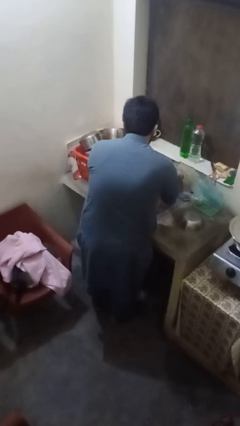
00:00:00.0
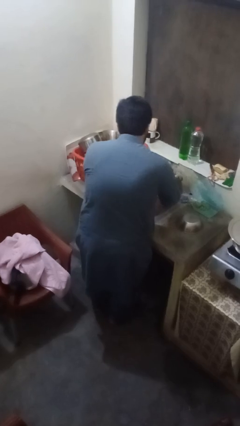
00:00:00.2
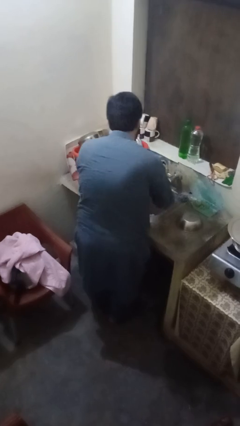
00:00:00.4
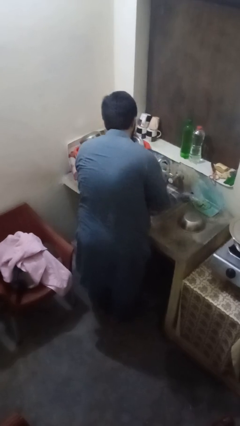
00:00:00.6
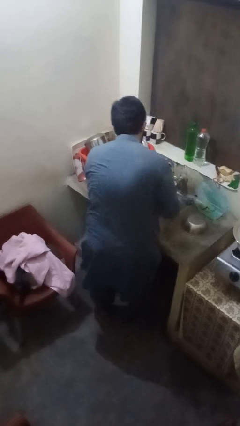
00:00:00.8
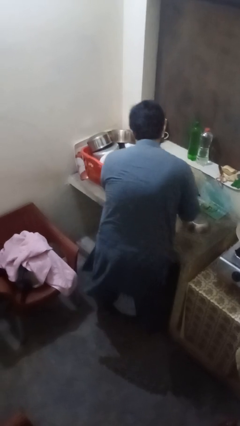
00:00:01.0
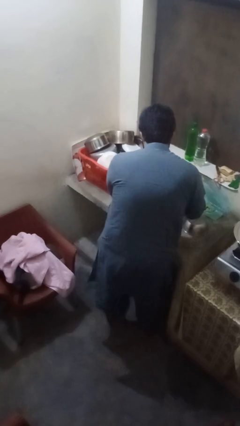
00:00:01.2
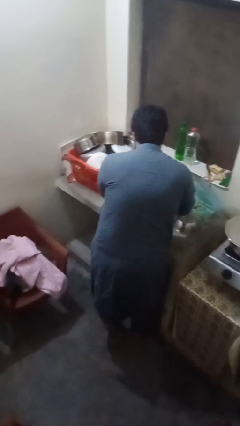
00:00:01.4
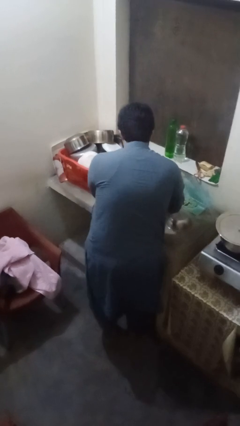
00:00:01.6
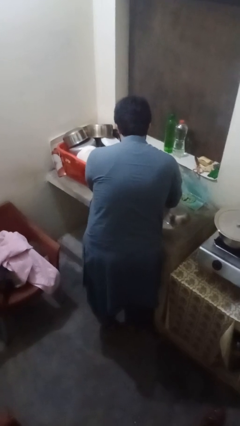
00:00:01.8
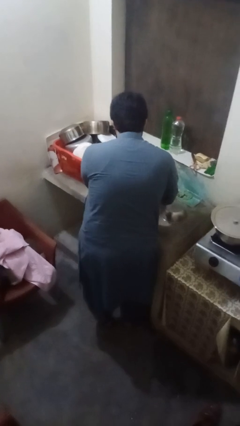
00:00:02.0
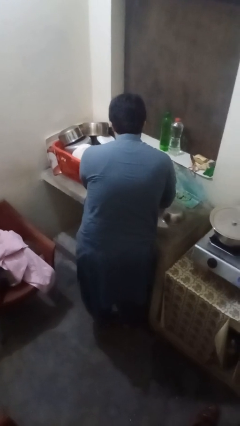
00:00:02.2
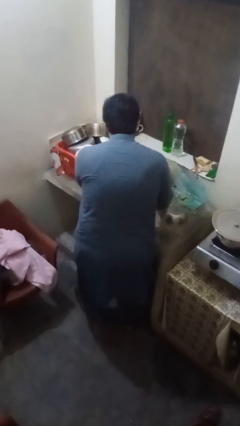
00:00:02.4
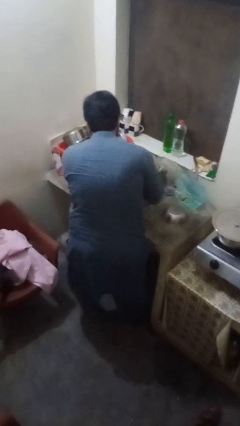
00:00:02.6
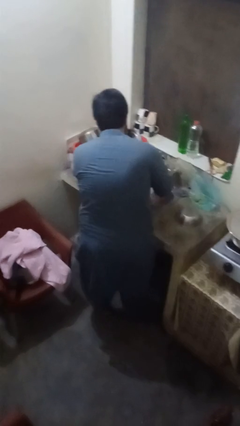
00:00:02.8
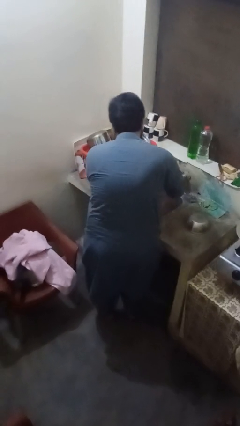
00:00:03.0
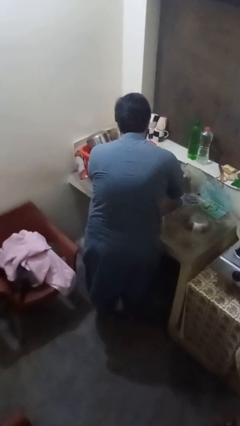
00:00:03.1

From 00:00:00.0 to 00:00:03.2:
person washes dish

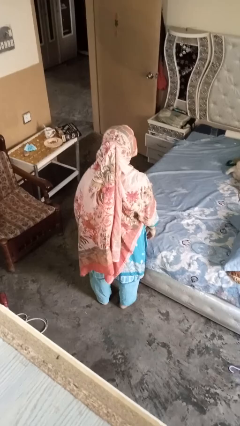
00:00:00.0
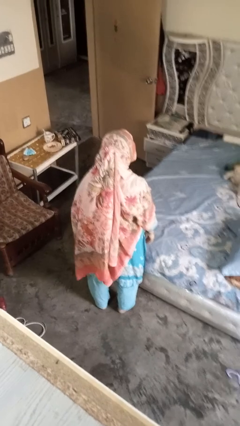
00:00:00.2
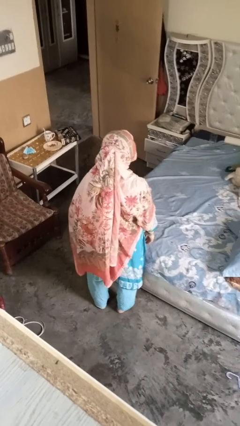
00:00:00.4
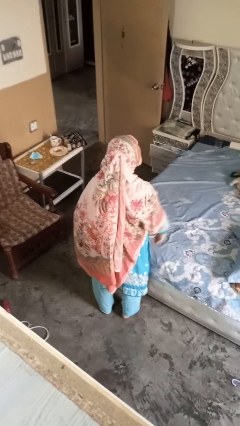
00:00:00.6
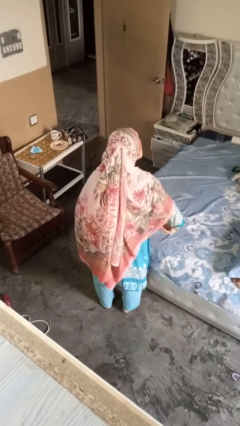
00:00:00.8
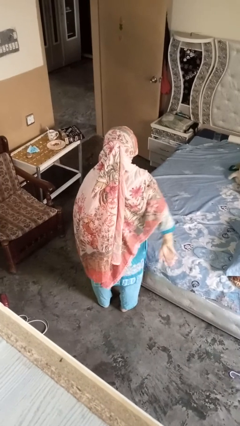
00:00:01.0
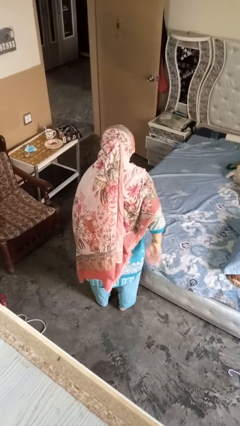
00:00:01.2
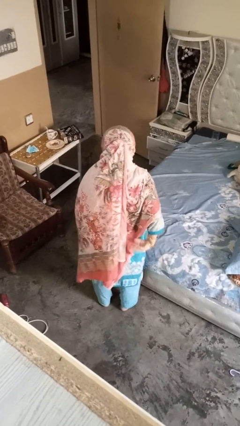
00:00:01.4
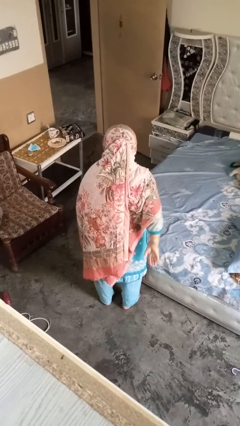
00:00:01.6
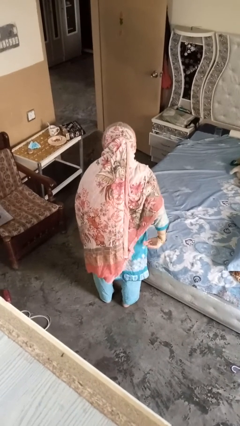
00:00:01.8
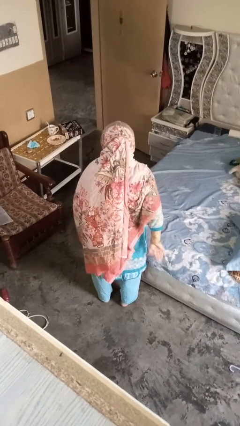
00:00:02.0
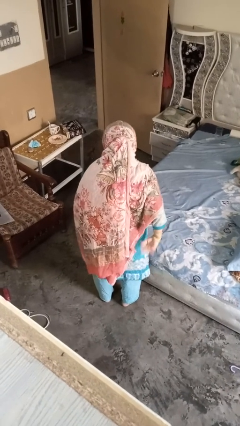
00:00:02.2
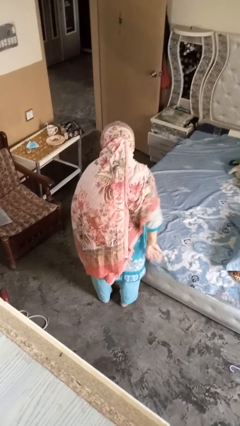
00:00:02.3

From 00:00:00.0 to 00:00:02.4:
person gestures behind me

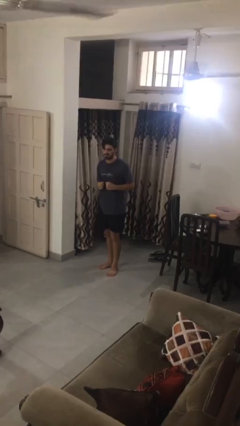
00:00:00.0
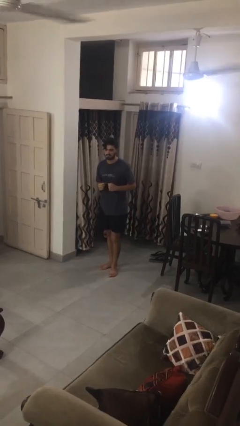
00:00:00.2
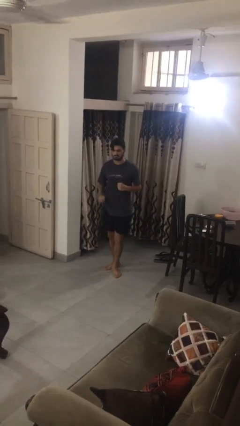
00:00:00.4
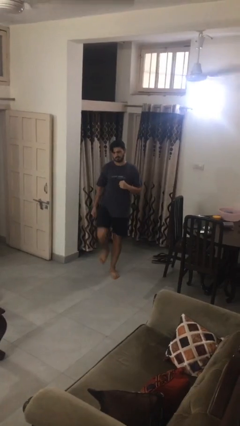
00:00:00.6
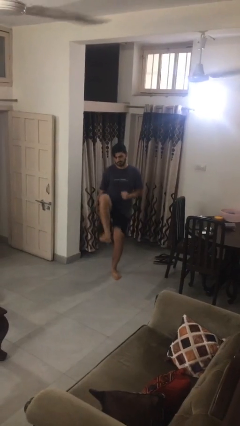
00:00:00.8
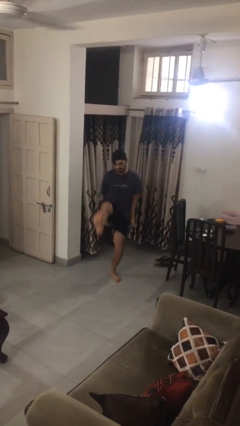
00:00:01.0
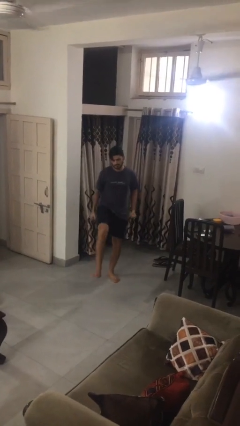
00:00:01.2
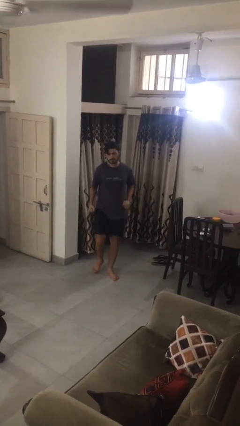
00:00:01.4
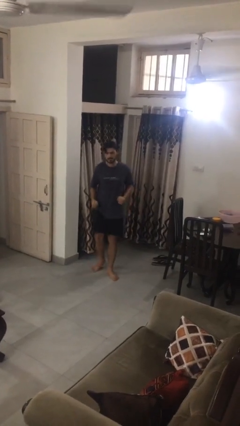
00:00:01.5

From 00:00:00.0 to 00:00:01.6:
person karate kicks

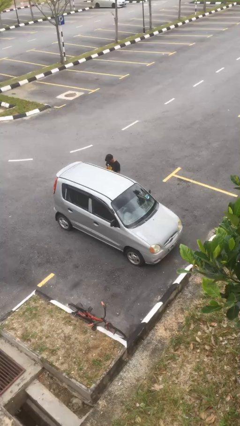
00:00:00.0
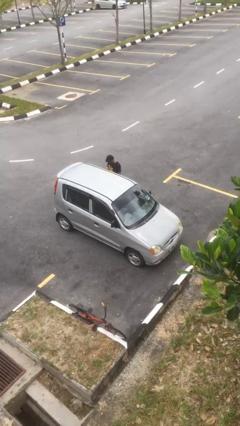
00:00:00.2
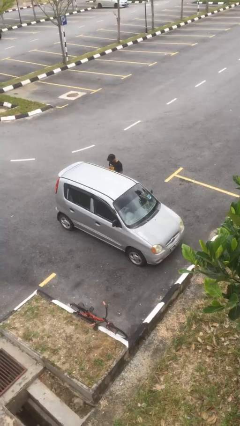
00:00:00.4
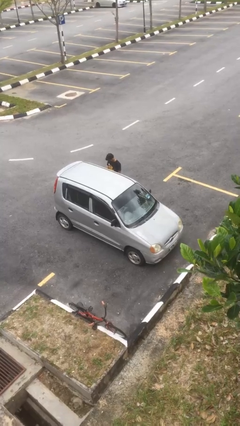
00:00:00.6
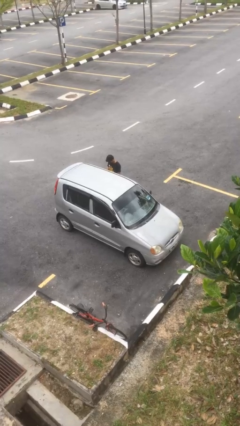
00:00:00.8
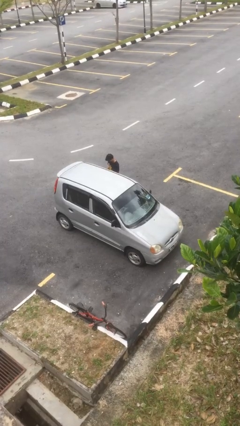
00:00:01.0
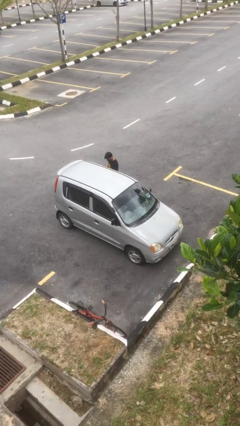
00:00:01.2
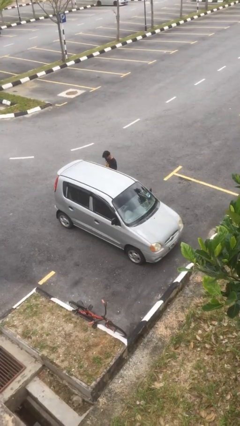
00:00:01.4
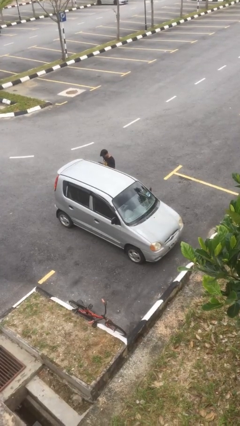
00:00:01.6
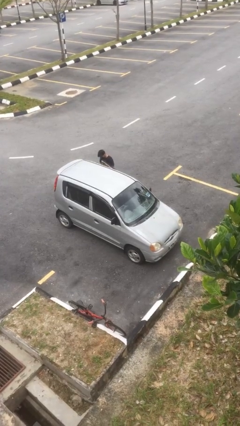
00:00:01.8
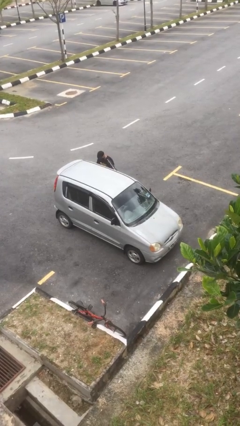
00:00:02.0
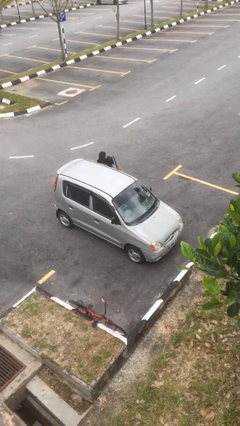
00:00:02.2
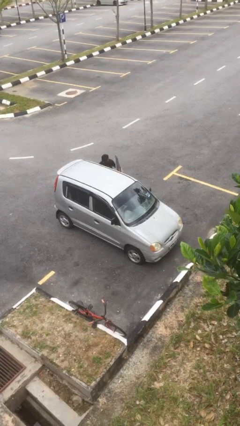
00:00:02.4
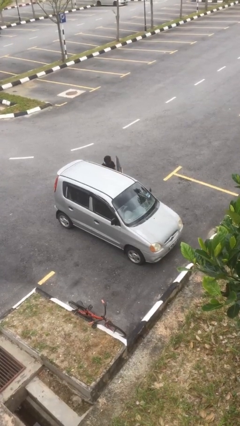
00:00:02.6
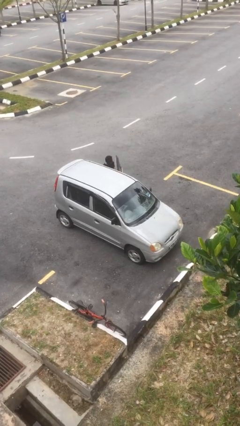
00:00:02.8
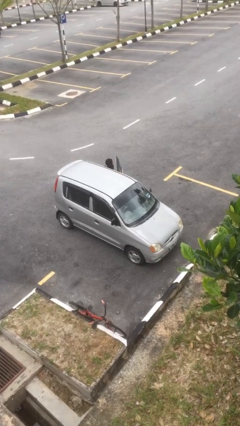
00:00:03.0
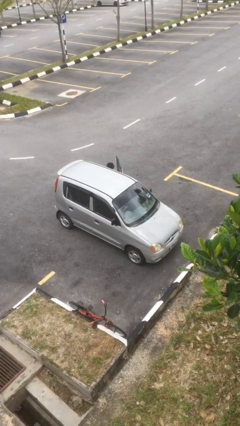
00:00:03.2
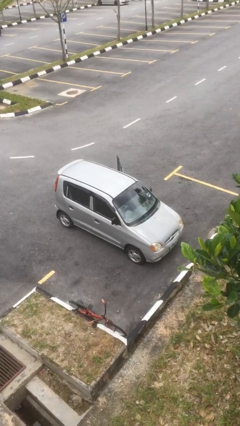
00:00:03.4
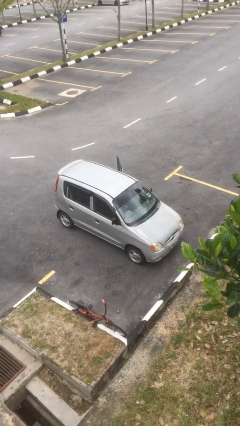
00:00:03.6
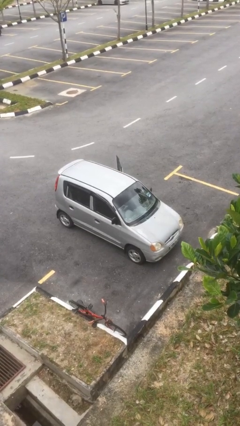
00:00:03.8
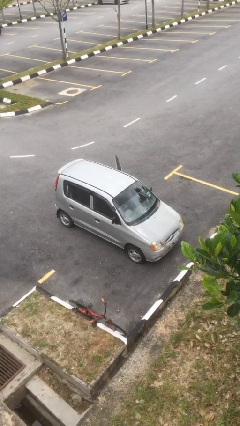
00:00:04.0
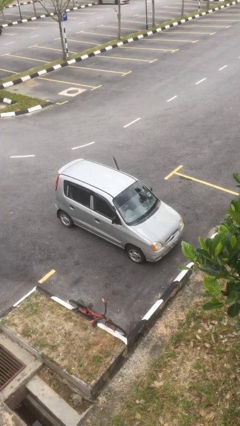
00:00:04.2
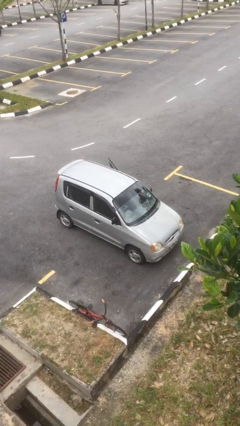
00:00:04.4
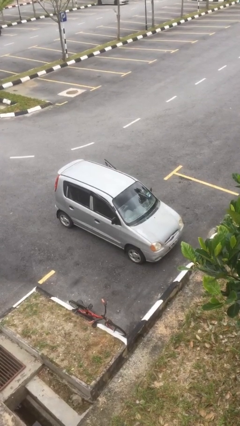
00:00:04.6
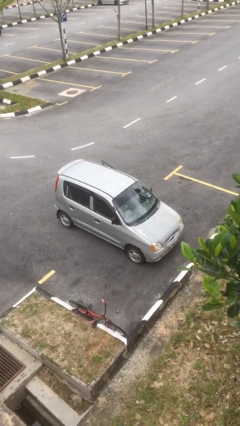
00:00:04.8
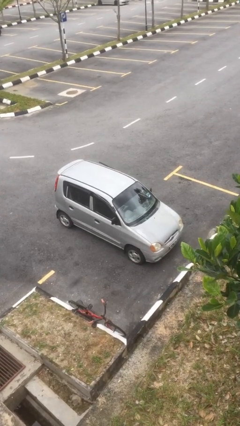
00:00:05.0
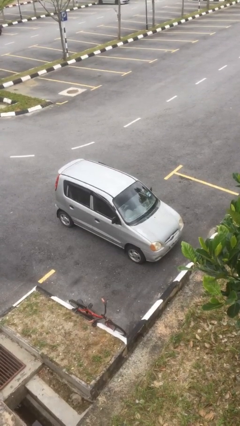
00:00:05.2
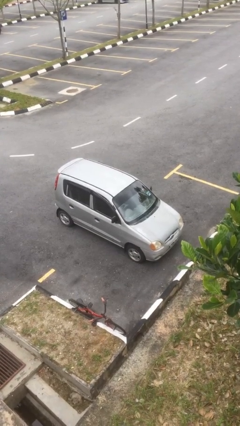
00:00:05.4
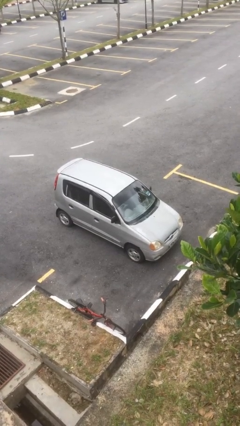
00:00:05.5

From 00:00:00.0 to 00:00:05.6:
car picks up person

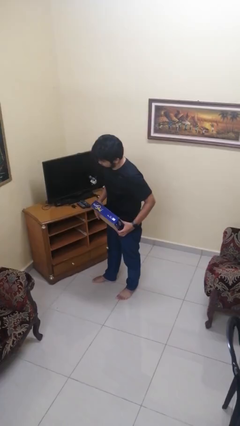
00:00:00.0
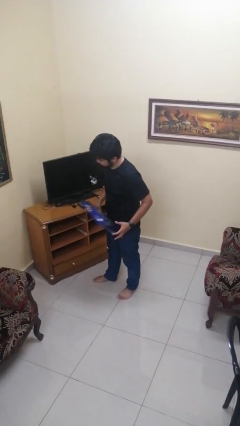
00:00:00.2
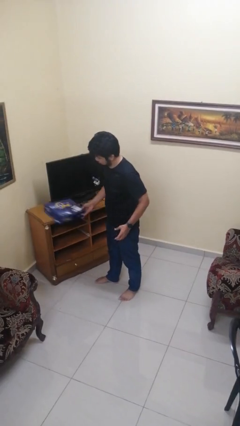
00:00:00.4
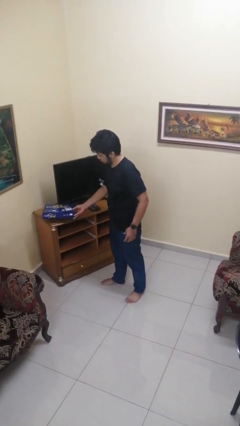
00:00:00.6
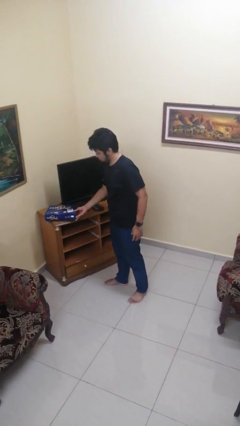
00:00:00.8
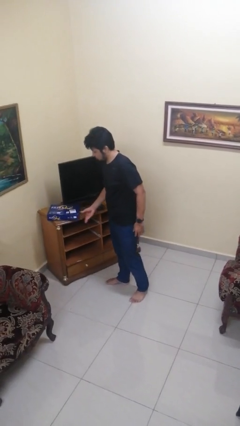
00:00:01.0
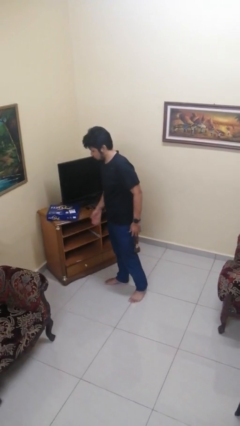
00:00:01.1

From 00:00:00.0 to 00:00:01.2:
person puts down object on countertop

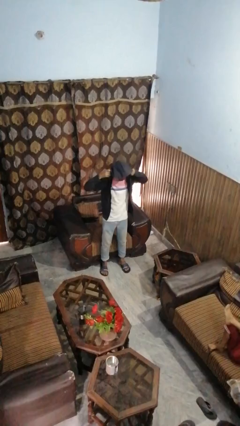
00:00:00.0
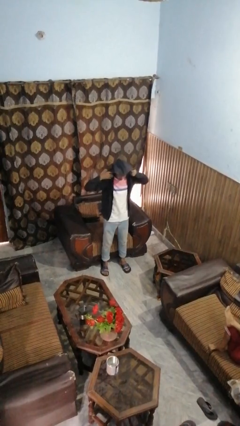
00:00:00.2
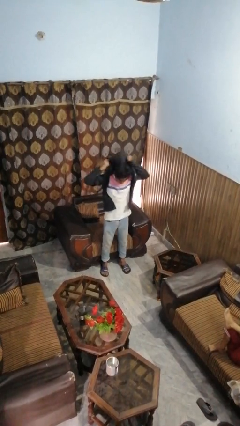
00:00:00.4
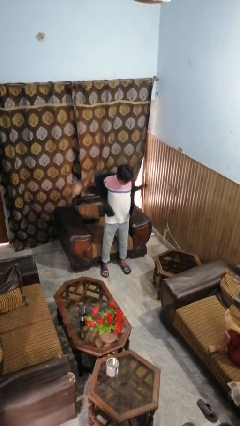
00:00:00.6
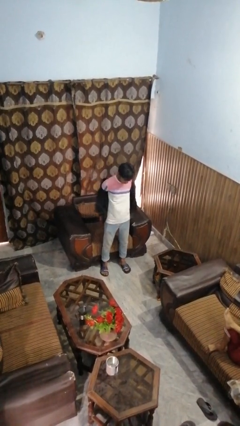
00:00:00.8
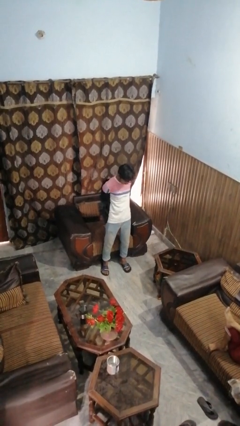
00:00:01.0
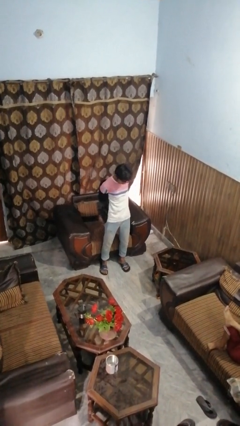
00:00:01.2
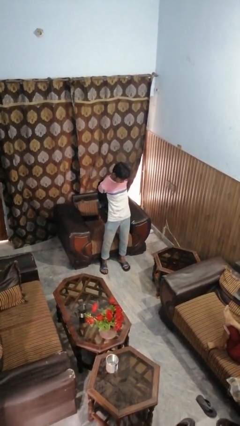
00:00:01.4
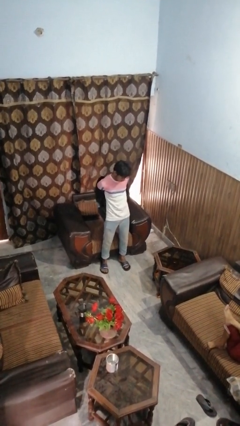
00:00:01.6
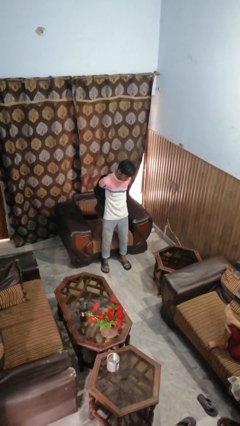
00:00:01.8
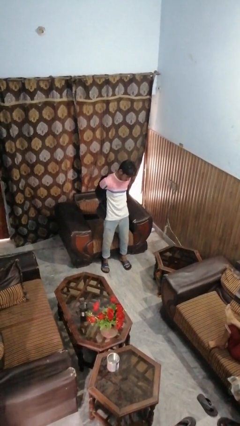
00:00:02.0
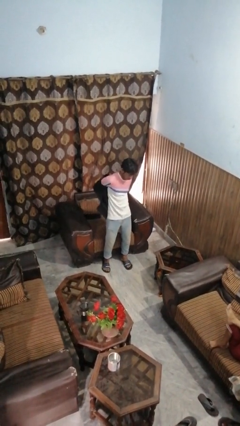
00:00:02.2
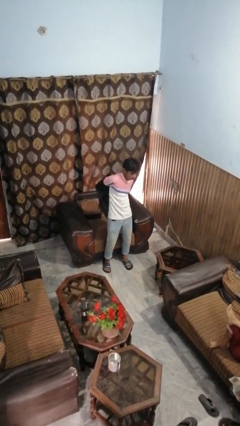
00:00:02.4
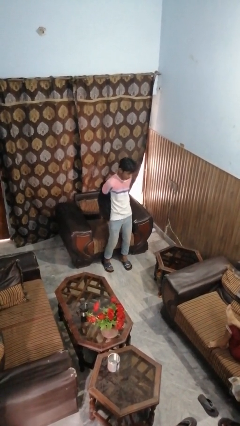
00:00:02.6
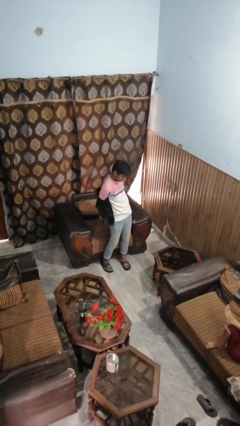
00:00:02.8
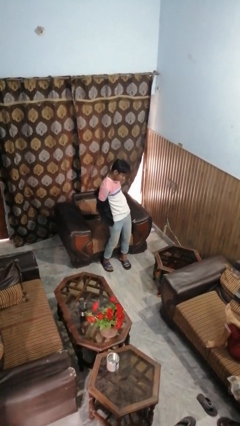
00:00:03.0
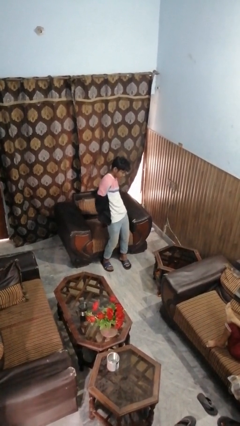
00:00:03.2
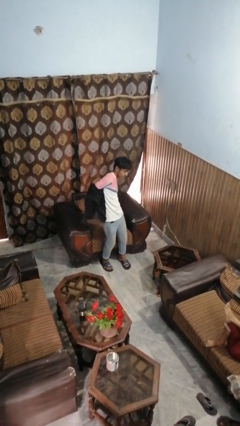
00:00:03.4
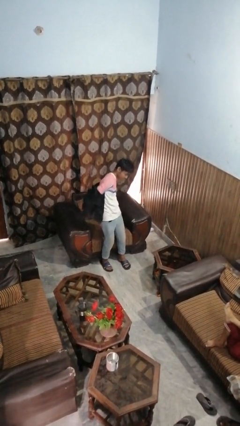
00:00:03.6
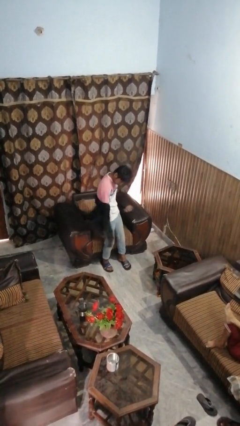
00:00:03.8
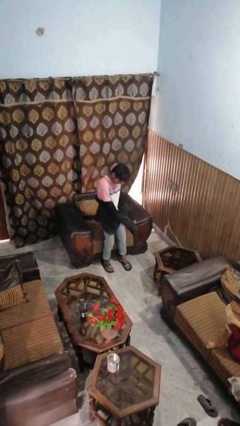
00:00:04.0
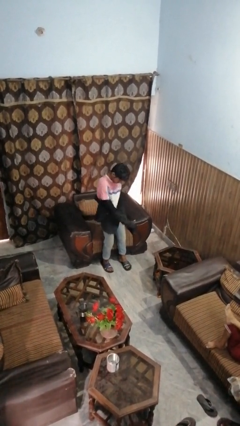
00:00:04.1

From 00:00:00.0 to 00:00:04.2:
person takes off hoodie
